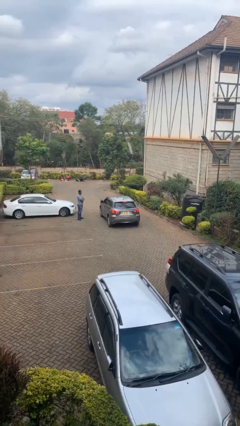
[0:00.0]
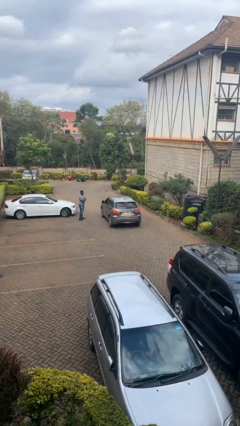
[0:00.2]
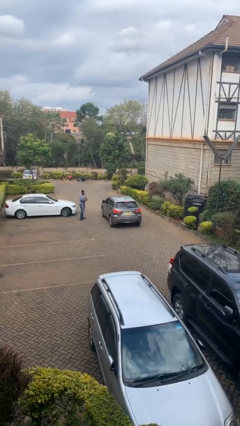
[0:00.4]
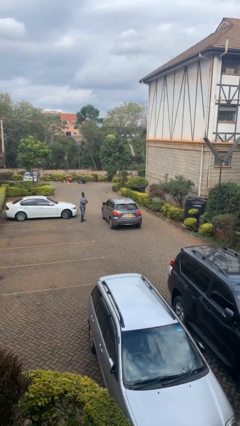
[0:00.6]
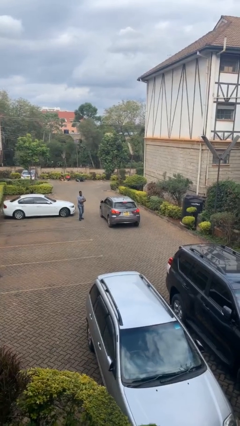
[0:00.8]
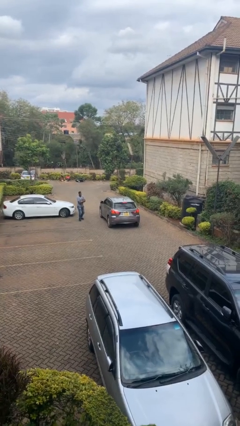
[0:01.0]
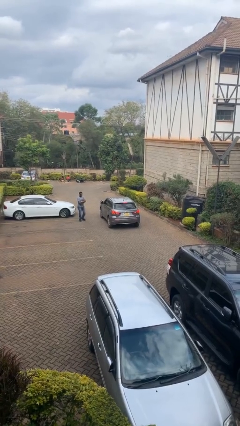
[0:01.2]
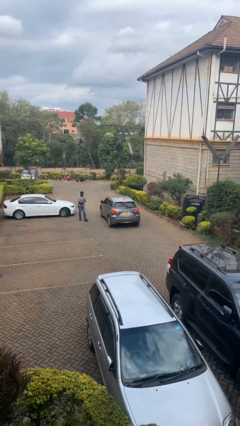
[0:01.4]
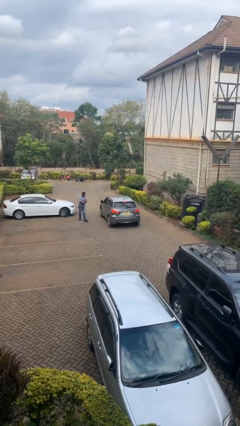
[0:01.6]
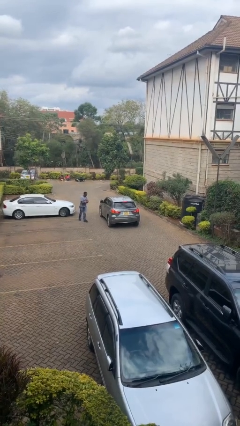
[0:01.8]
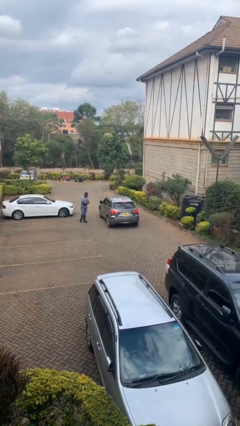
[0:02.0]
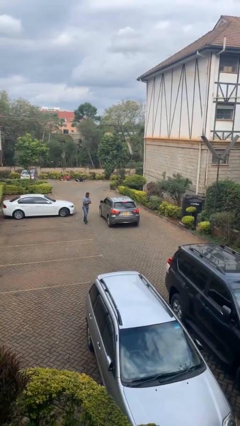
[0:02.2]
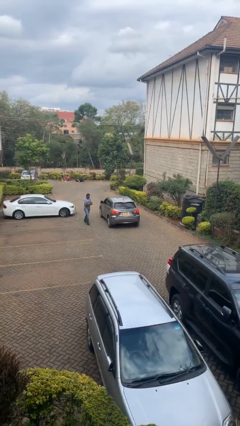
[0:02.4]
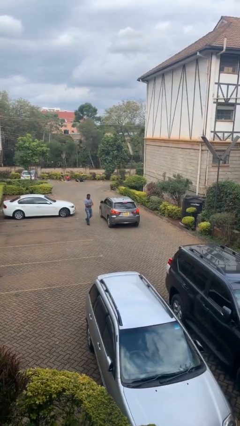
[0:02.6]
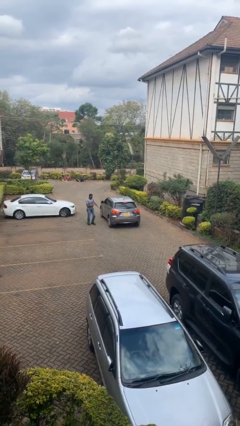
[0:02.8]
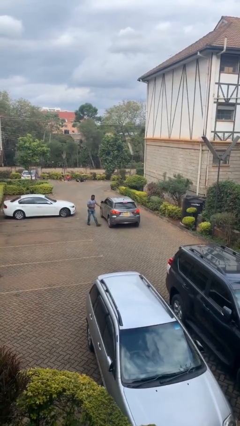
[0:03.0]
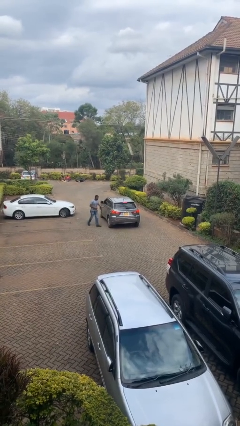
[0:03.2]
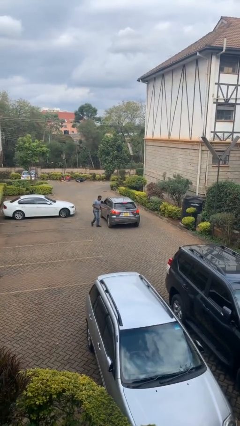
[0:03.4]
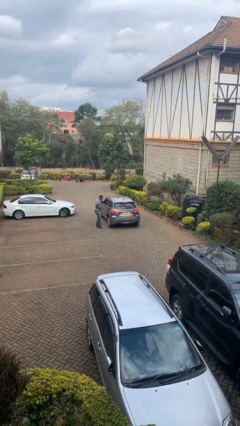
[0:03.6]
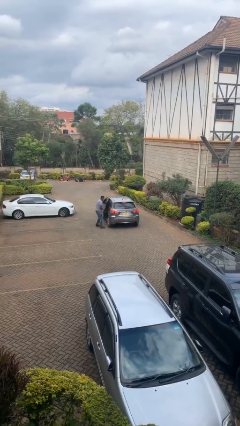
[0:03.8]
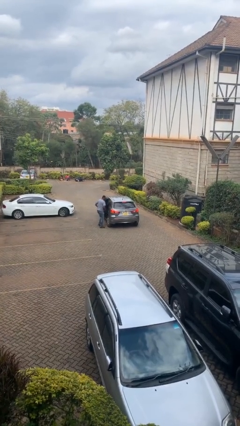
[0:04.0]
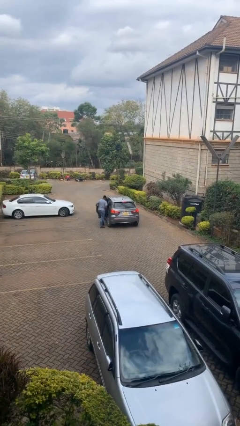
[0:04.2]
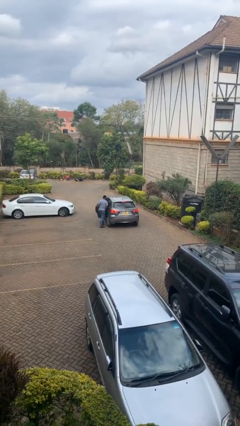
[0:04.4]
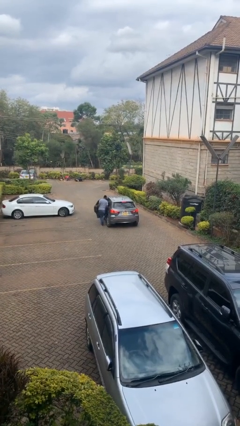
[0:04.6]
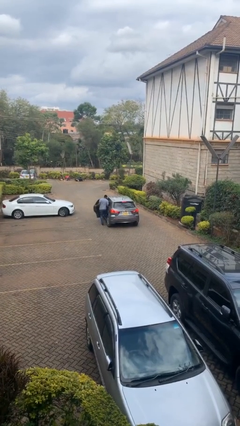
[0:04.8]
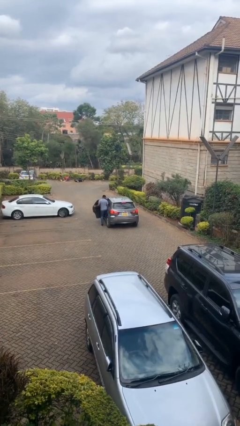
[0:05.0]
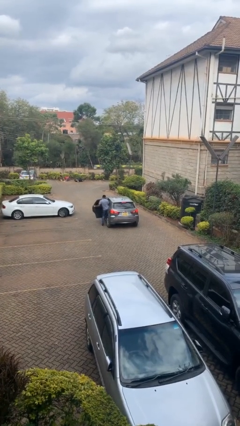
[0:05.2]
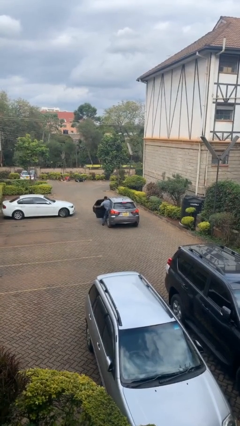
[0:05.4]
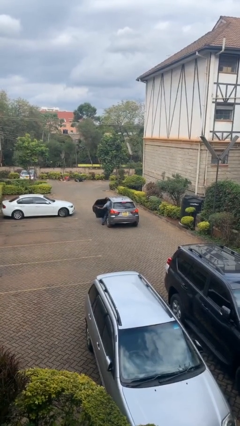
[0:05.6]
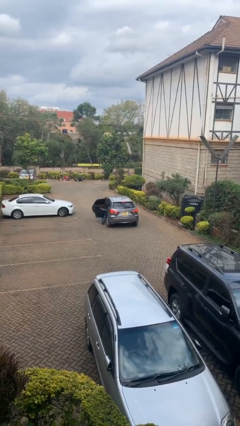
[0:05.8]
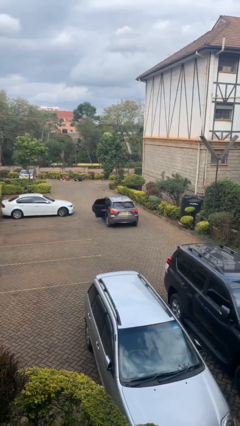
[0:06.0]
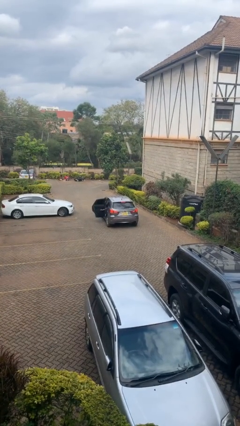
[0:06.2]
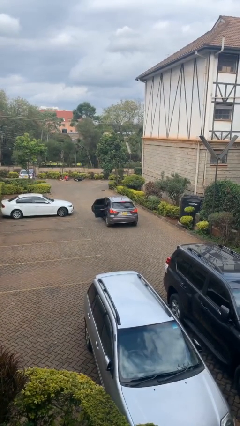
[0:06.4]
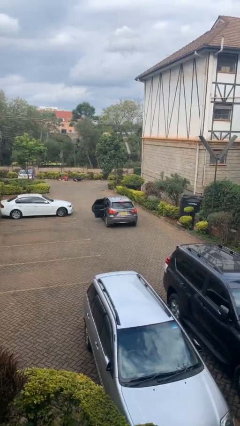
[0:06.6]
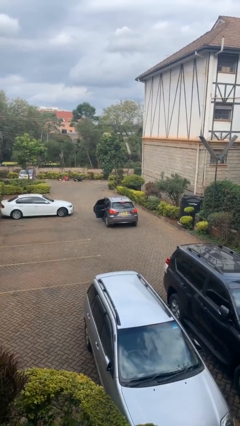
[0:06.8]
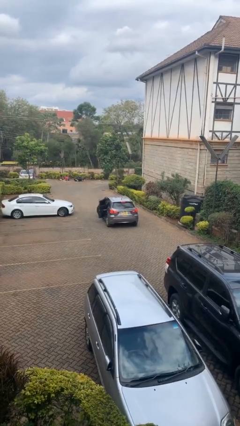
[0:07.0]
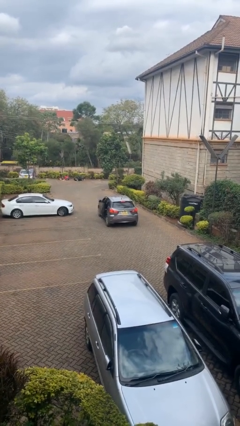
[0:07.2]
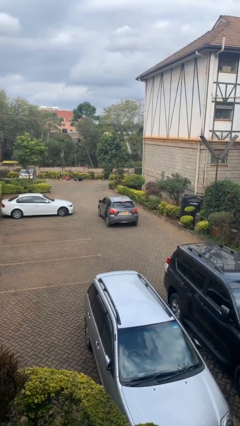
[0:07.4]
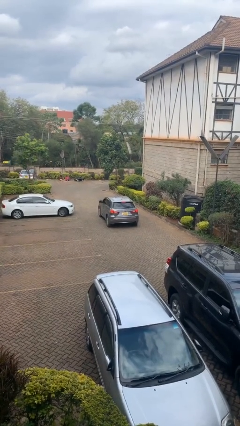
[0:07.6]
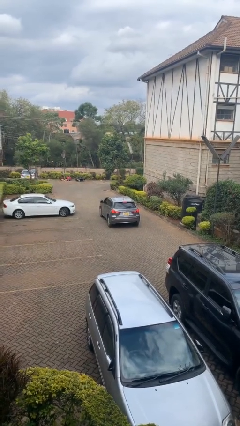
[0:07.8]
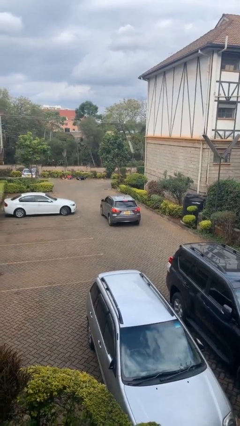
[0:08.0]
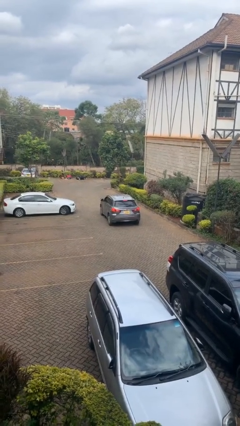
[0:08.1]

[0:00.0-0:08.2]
car picks up person

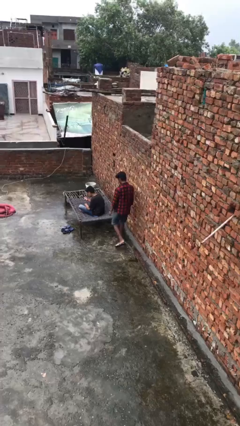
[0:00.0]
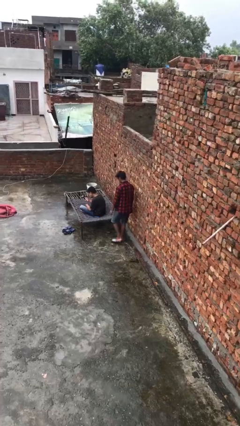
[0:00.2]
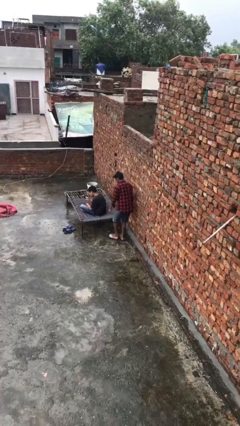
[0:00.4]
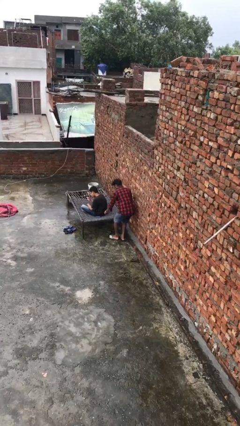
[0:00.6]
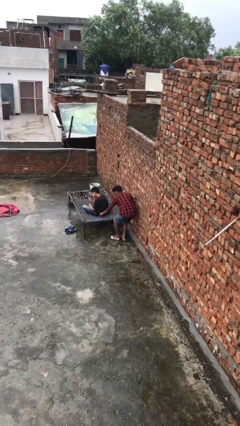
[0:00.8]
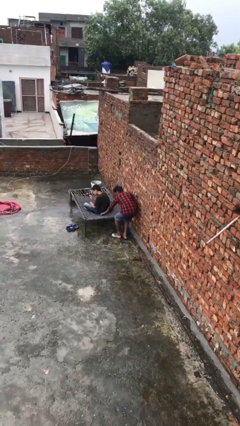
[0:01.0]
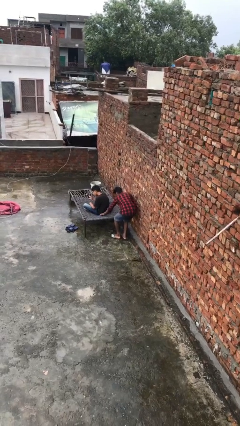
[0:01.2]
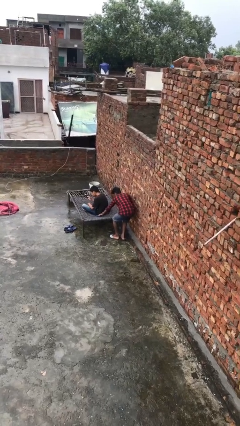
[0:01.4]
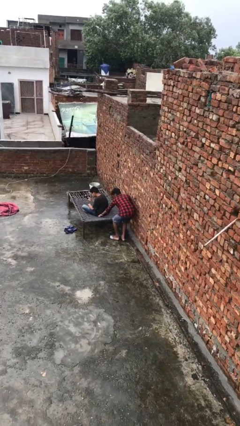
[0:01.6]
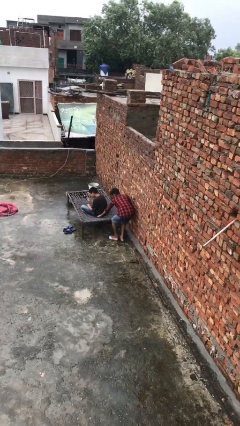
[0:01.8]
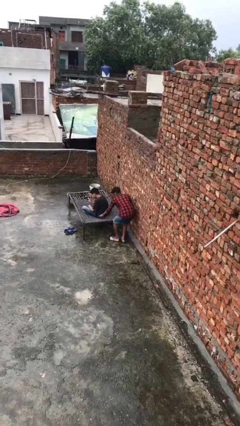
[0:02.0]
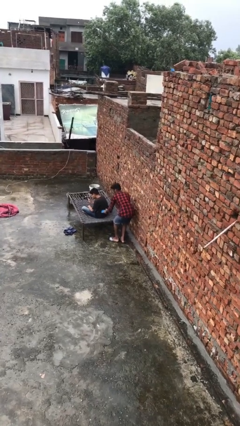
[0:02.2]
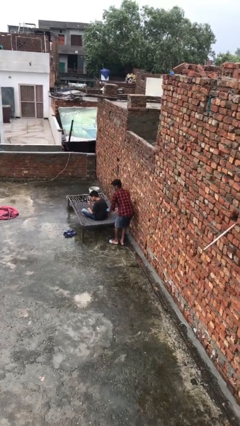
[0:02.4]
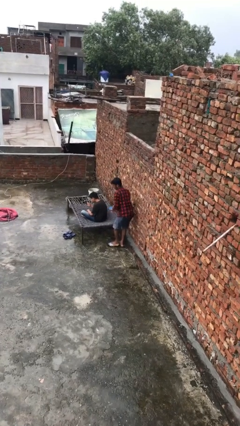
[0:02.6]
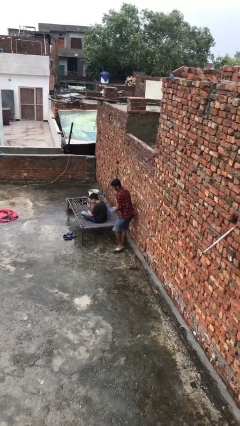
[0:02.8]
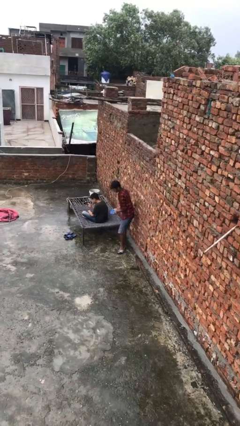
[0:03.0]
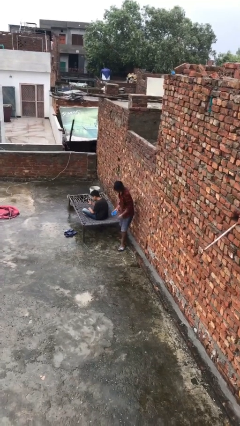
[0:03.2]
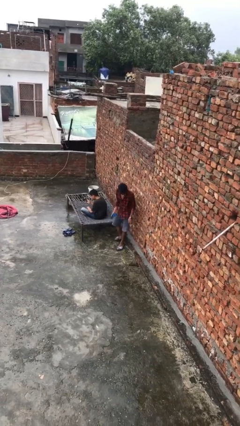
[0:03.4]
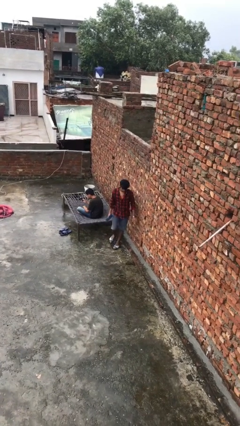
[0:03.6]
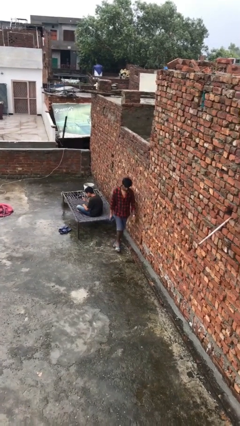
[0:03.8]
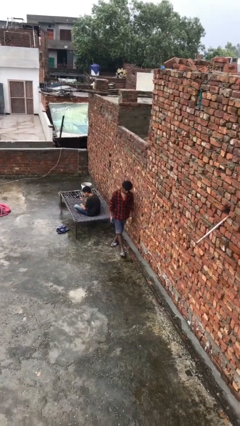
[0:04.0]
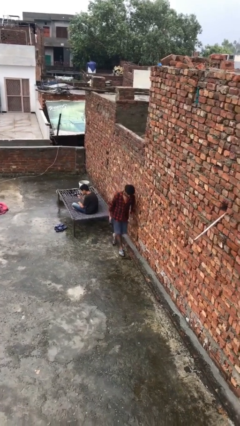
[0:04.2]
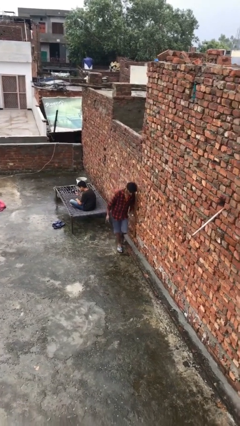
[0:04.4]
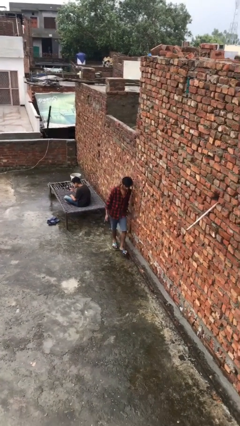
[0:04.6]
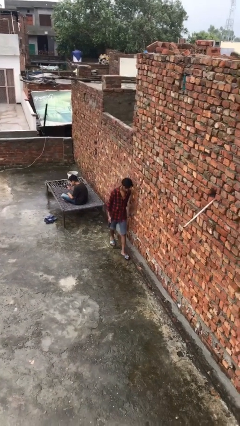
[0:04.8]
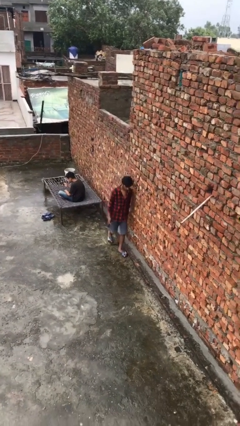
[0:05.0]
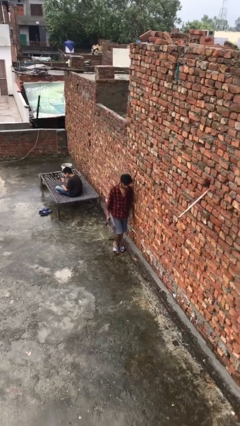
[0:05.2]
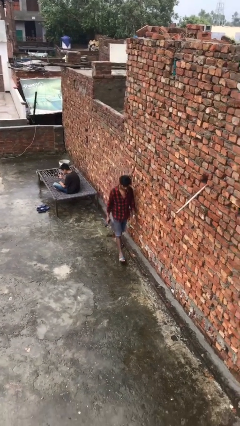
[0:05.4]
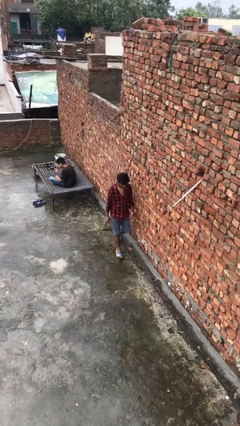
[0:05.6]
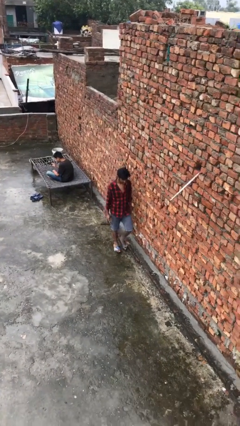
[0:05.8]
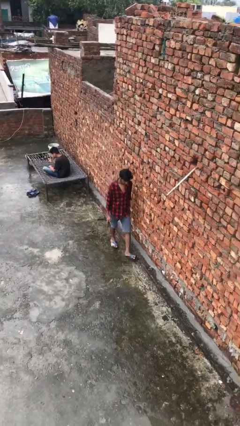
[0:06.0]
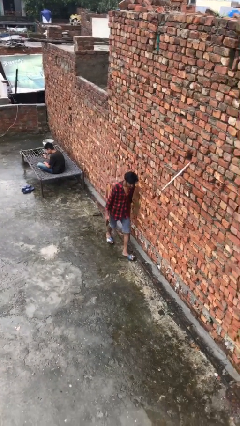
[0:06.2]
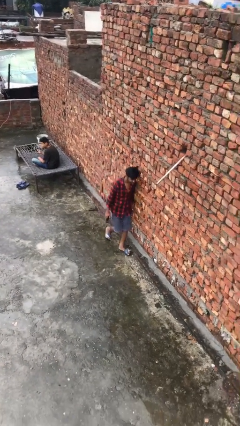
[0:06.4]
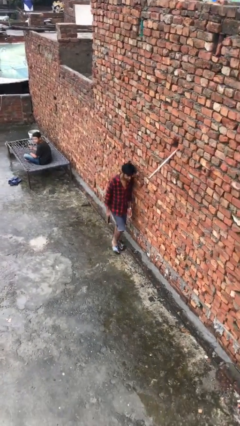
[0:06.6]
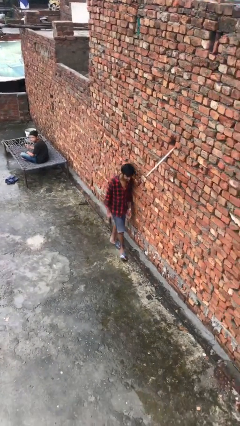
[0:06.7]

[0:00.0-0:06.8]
person steals object from person

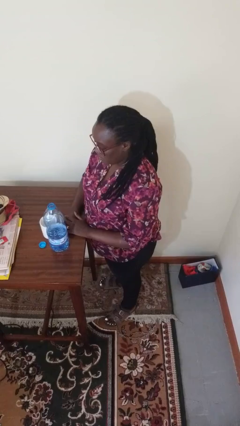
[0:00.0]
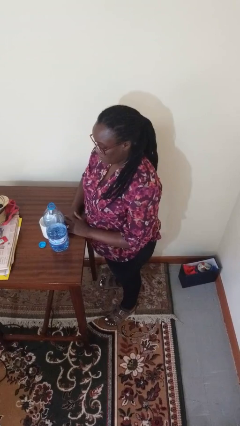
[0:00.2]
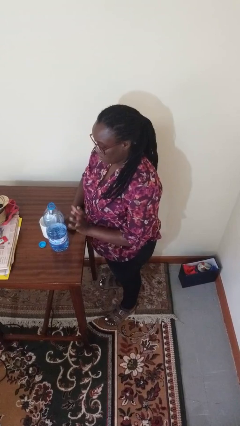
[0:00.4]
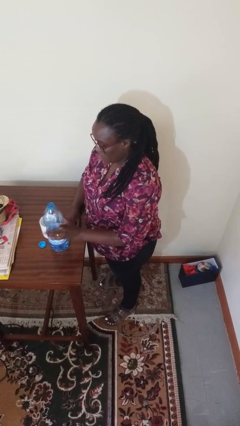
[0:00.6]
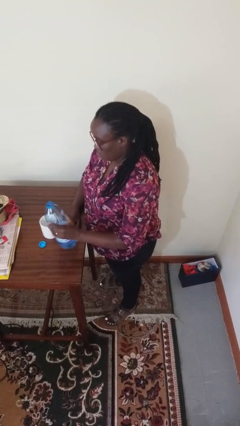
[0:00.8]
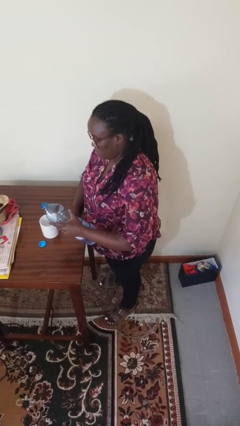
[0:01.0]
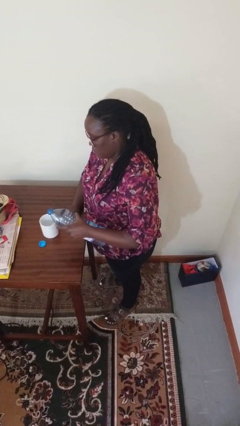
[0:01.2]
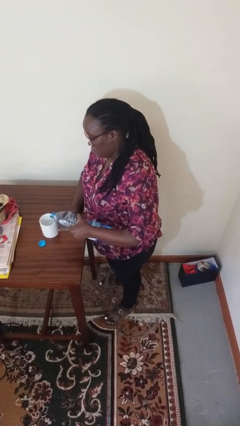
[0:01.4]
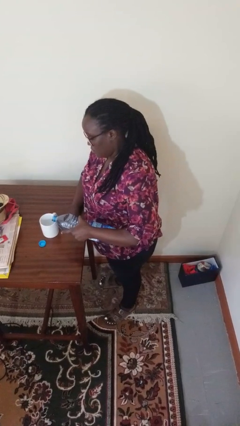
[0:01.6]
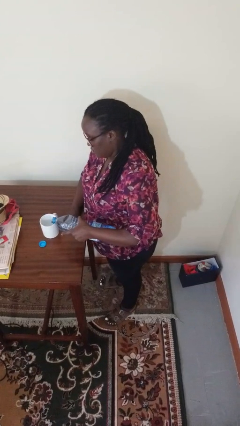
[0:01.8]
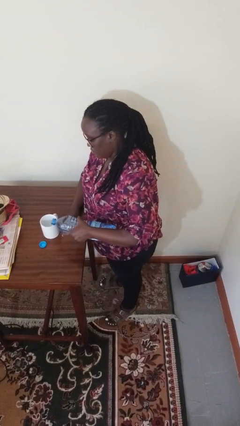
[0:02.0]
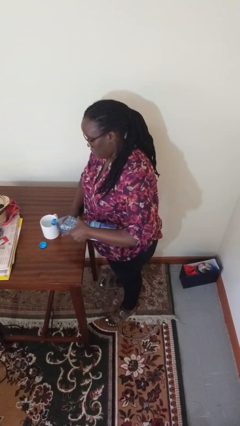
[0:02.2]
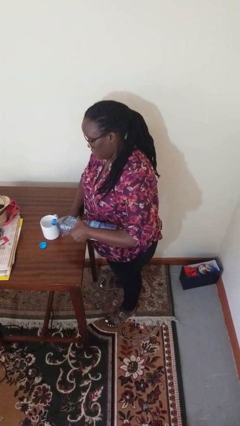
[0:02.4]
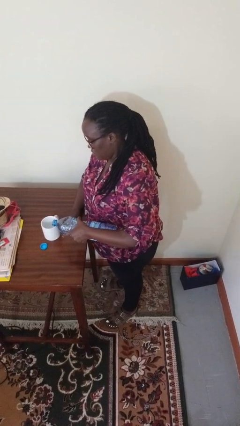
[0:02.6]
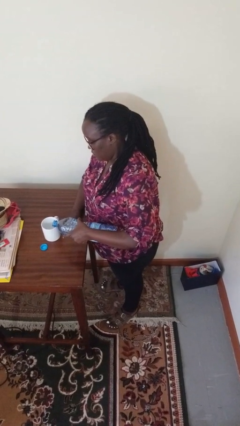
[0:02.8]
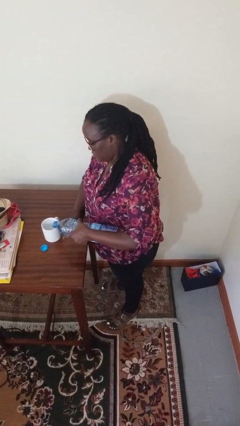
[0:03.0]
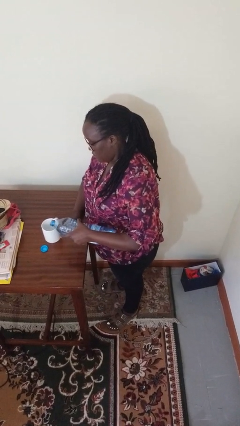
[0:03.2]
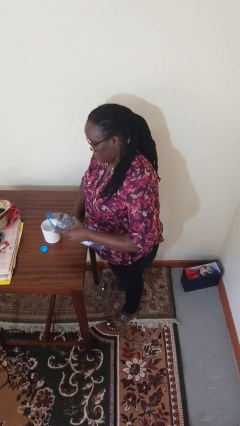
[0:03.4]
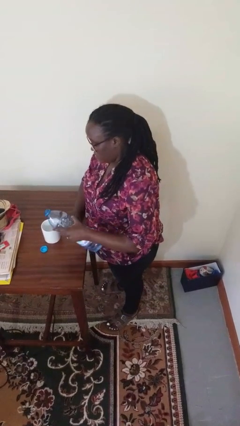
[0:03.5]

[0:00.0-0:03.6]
person pours liquid into cup
